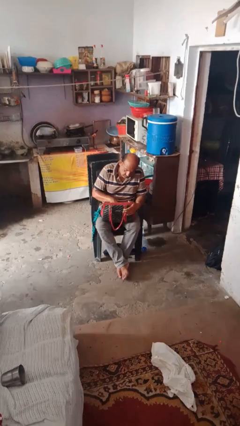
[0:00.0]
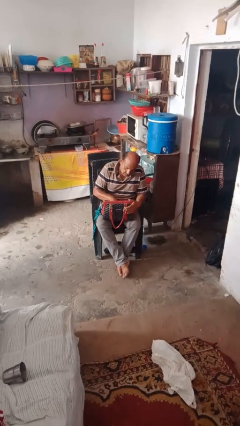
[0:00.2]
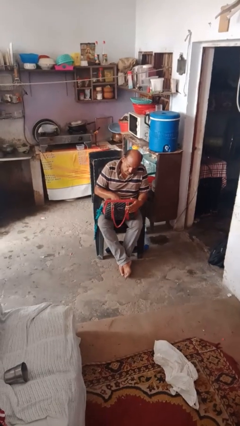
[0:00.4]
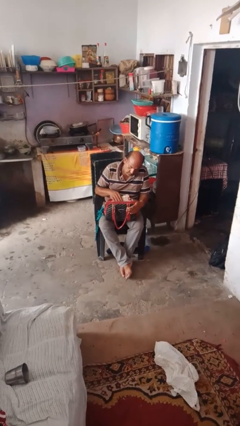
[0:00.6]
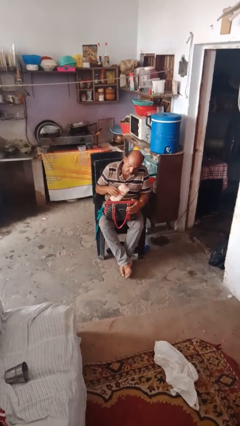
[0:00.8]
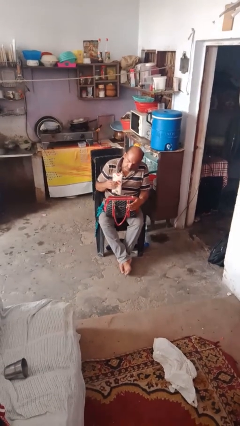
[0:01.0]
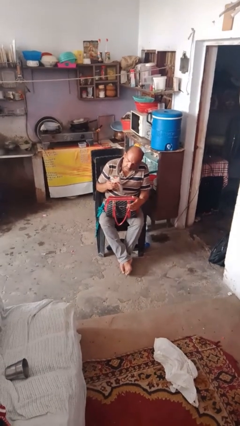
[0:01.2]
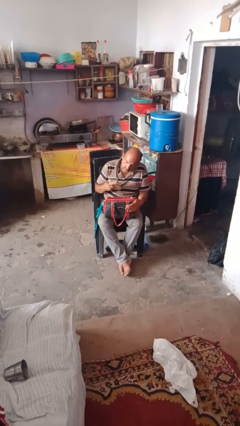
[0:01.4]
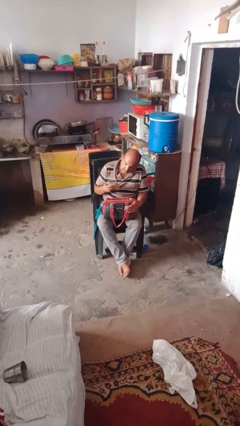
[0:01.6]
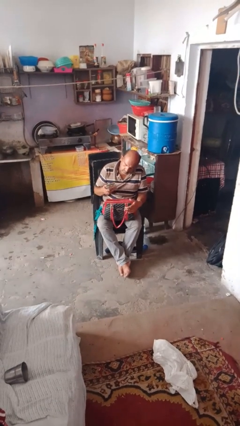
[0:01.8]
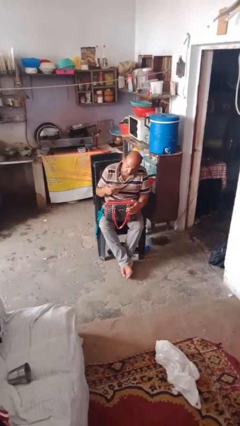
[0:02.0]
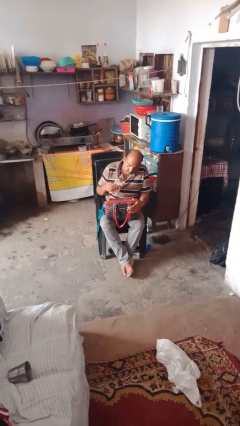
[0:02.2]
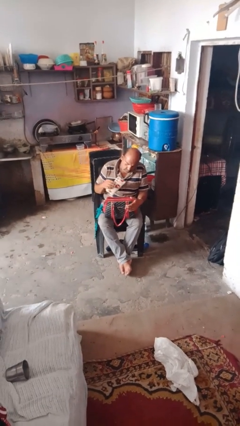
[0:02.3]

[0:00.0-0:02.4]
person takes object from purse

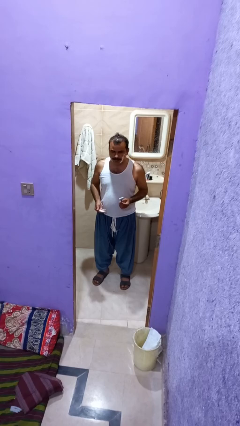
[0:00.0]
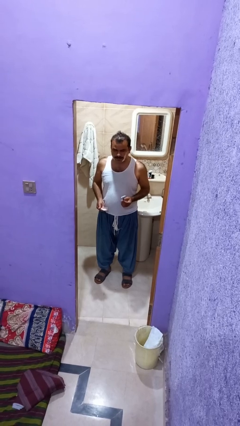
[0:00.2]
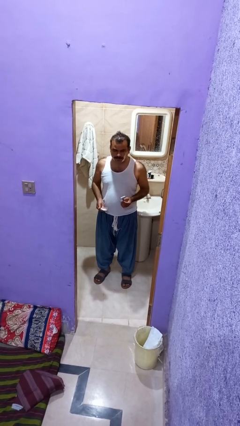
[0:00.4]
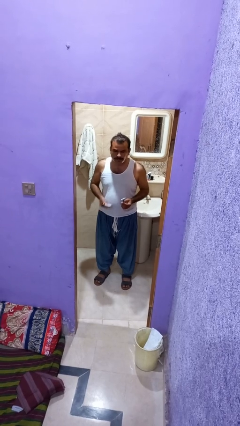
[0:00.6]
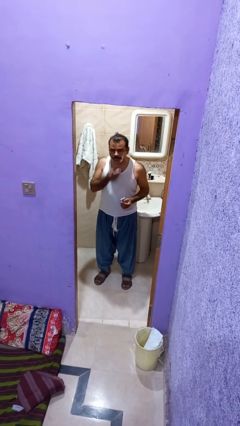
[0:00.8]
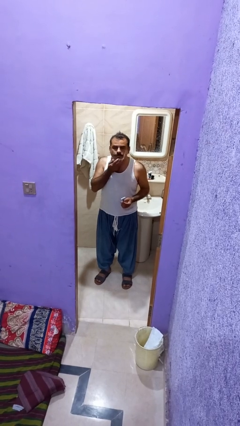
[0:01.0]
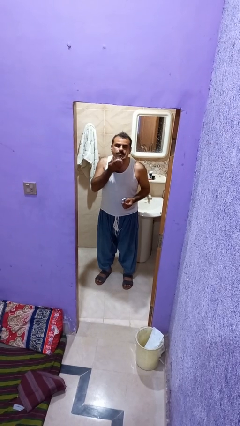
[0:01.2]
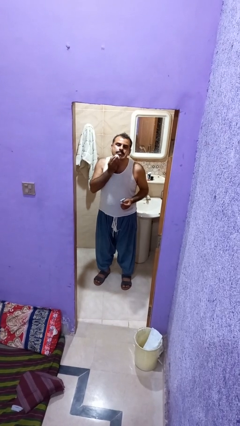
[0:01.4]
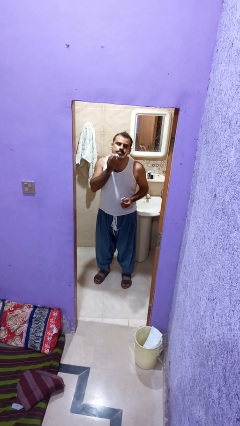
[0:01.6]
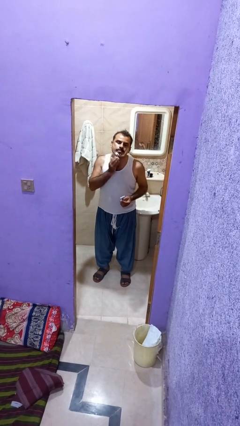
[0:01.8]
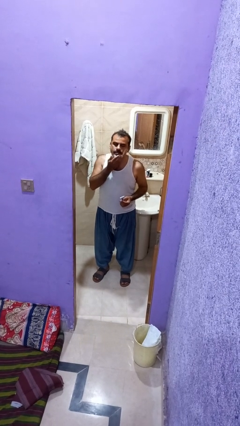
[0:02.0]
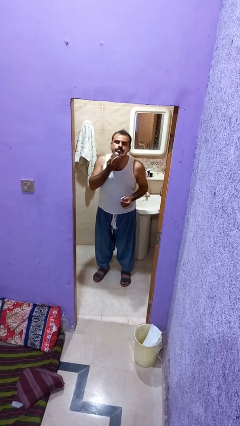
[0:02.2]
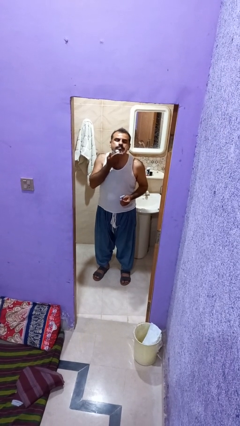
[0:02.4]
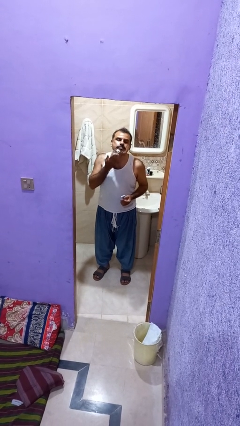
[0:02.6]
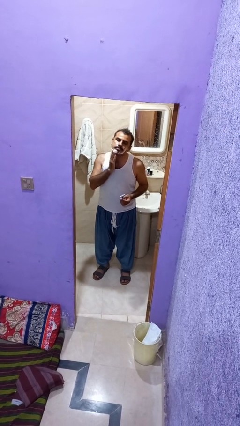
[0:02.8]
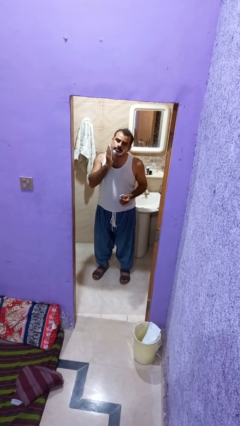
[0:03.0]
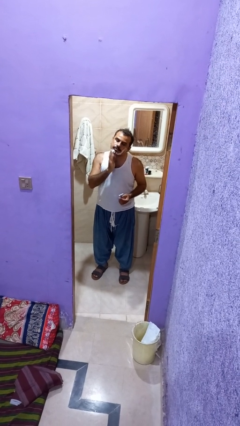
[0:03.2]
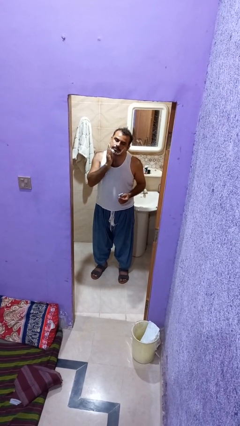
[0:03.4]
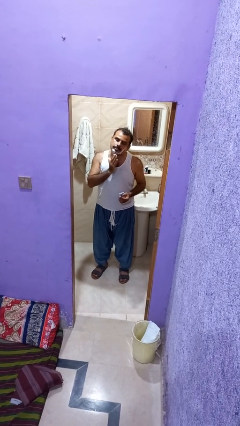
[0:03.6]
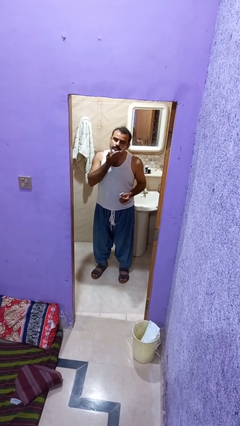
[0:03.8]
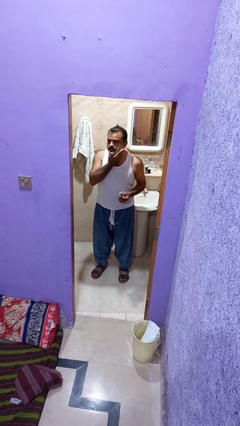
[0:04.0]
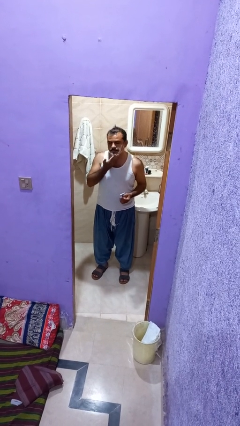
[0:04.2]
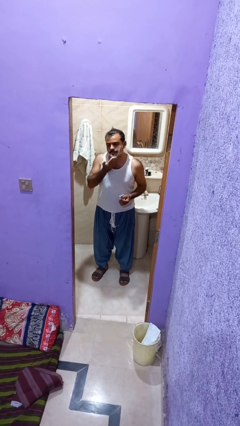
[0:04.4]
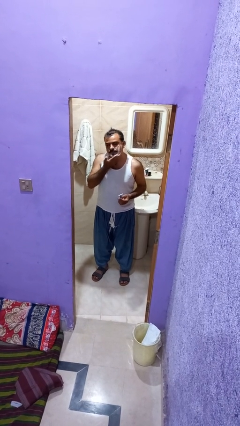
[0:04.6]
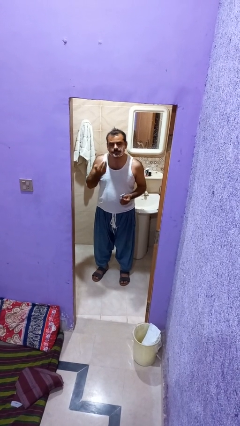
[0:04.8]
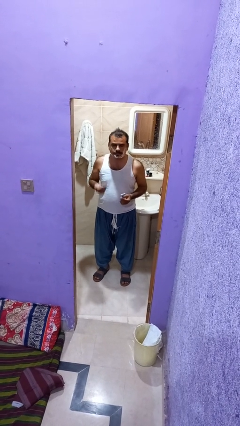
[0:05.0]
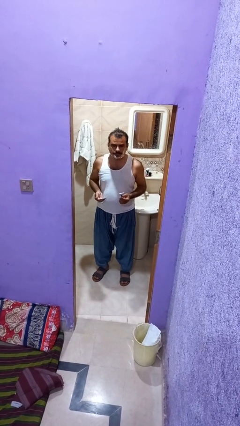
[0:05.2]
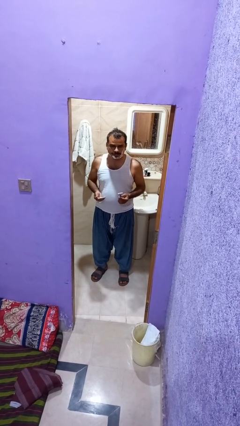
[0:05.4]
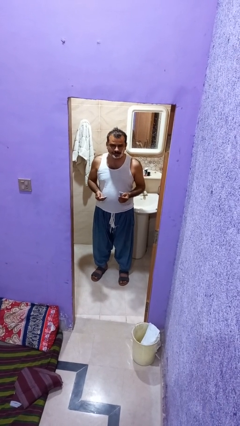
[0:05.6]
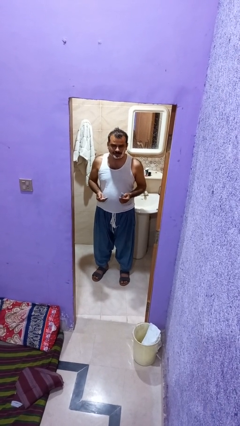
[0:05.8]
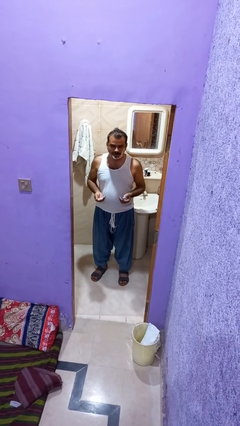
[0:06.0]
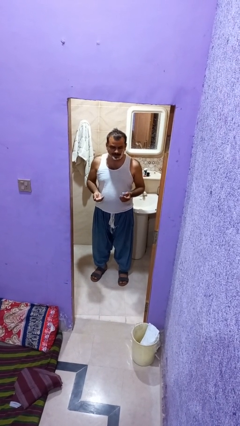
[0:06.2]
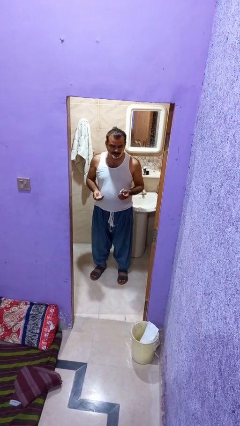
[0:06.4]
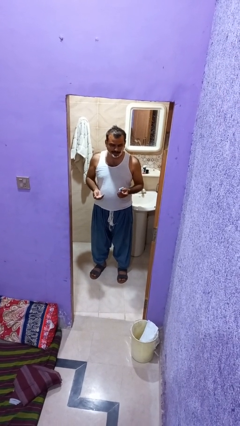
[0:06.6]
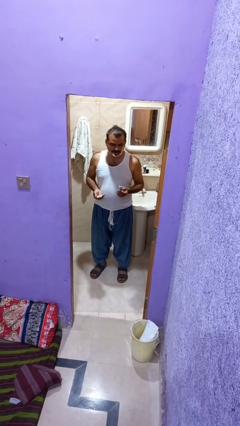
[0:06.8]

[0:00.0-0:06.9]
person applies shaving cream

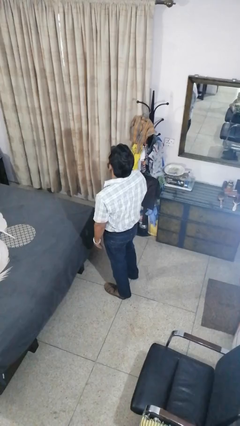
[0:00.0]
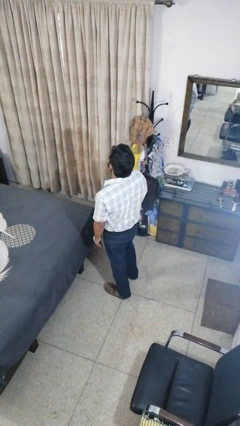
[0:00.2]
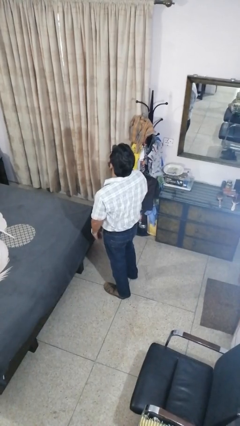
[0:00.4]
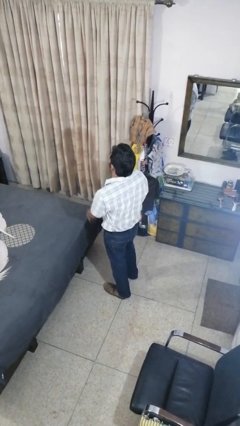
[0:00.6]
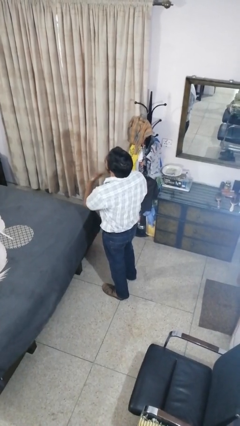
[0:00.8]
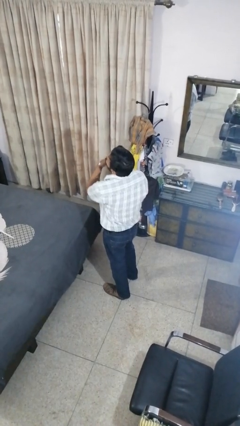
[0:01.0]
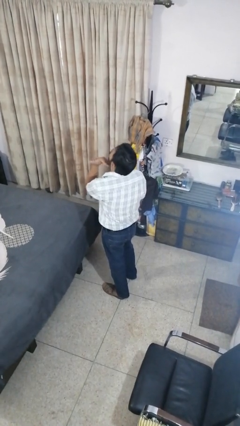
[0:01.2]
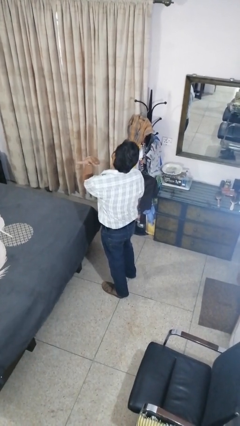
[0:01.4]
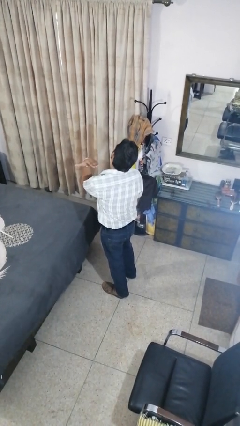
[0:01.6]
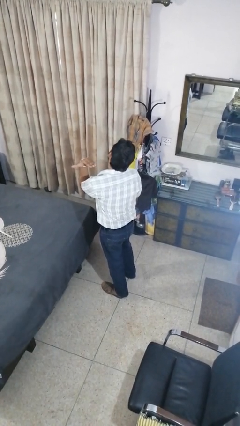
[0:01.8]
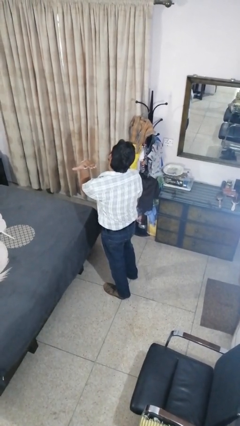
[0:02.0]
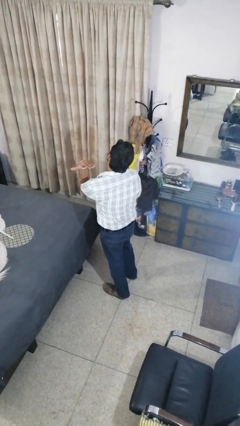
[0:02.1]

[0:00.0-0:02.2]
person gestures cut

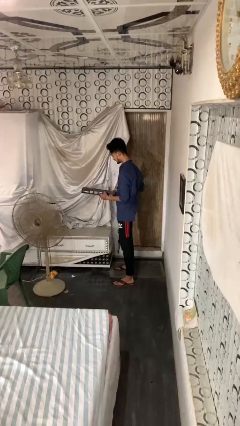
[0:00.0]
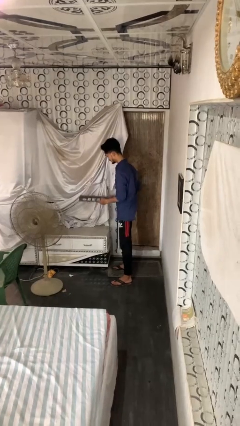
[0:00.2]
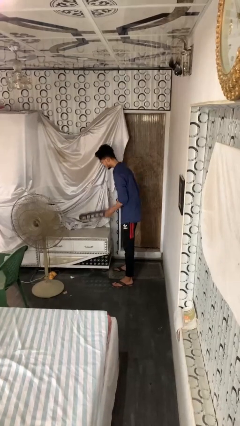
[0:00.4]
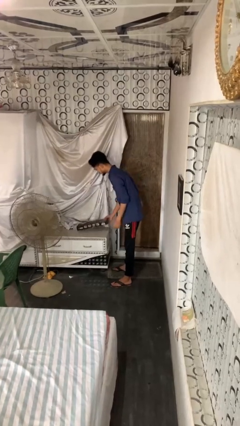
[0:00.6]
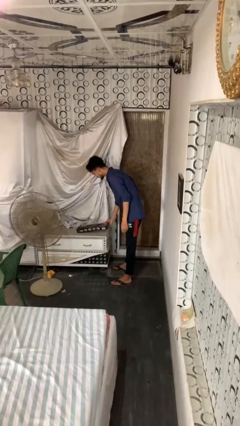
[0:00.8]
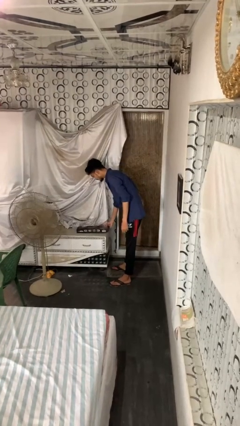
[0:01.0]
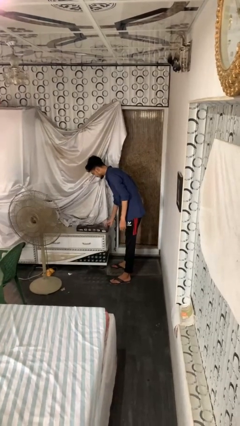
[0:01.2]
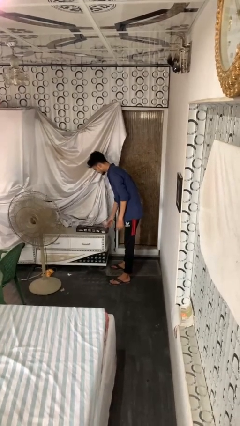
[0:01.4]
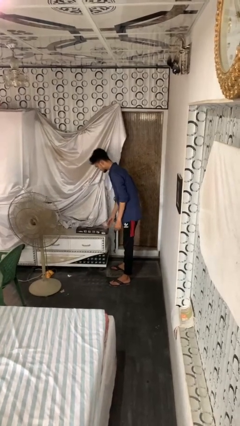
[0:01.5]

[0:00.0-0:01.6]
person puts down object on countertop

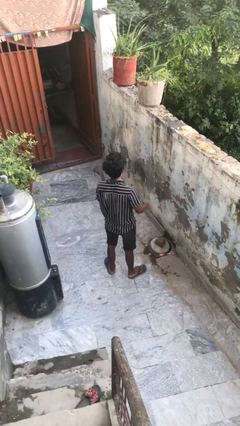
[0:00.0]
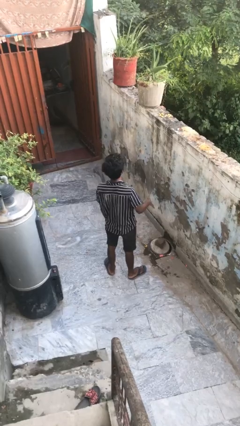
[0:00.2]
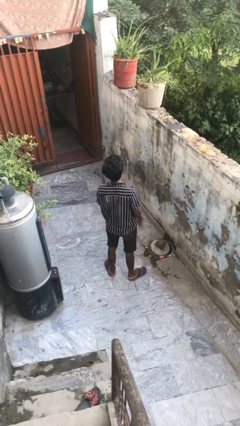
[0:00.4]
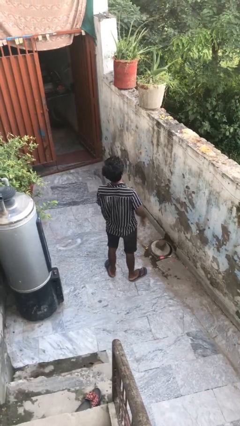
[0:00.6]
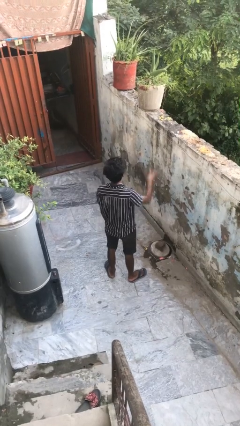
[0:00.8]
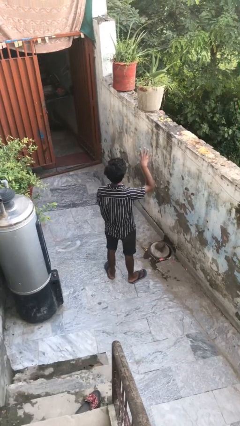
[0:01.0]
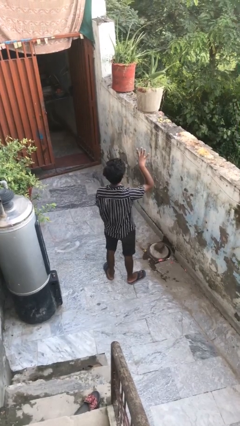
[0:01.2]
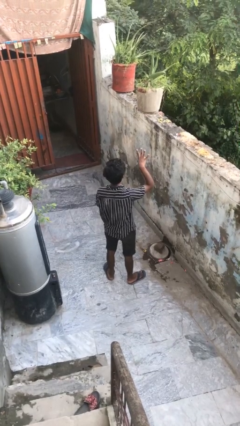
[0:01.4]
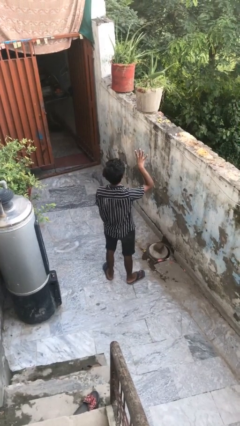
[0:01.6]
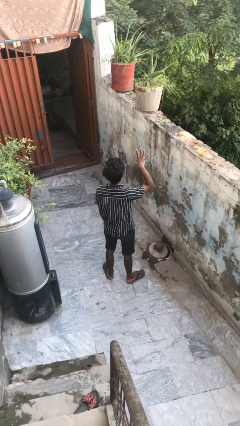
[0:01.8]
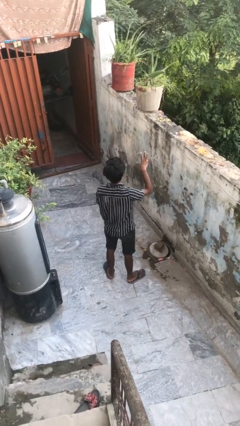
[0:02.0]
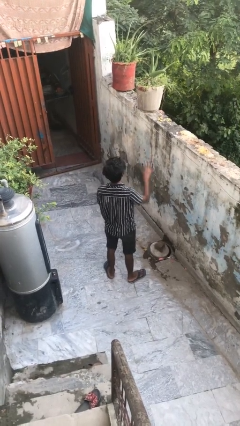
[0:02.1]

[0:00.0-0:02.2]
person gestures number four

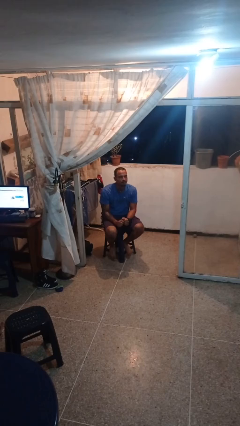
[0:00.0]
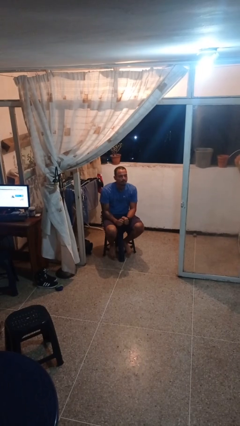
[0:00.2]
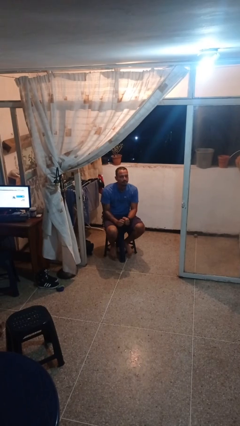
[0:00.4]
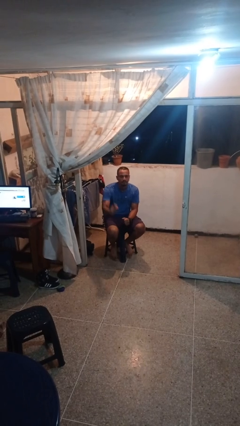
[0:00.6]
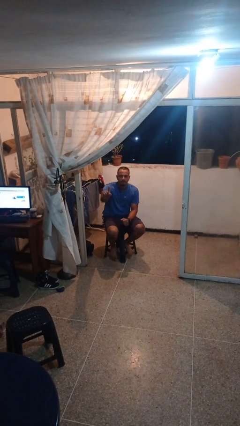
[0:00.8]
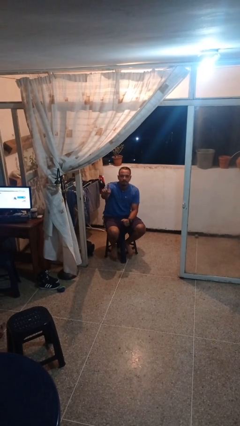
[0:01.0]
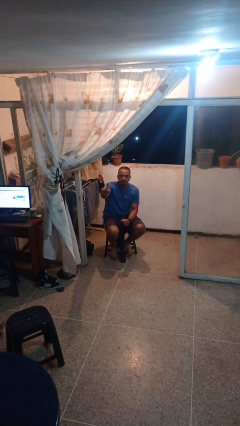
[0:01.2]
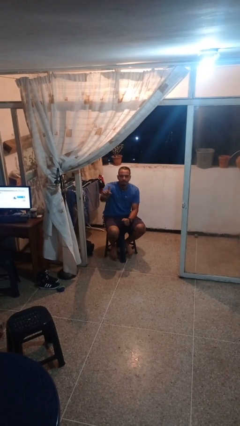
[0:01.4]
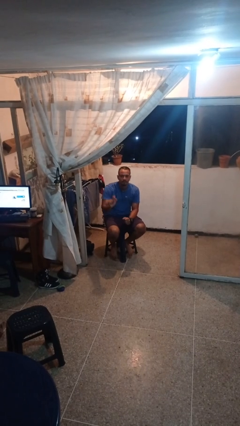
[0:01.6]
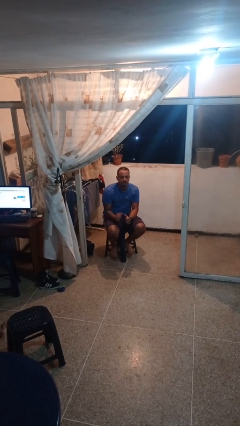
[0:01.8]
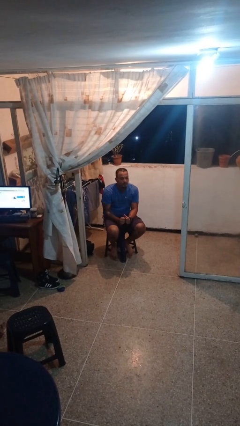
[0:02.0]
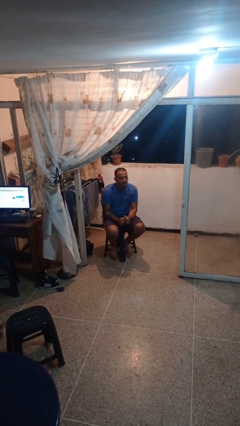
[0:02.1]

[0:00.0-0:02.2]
person gestures number one

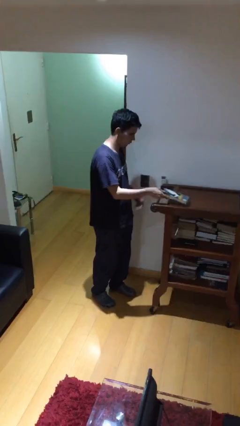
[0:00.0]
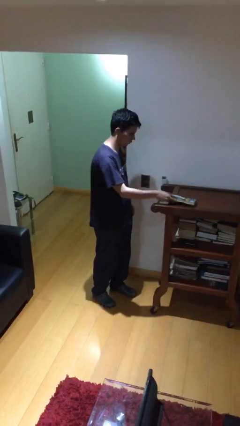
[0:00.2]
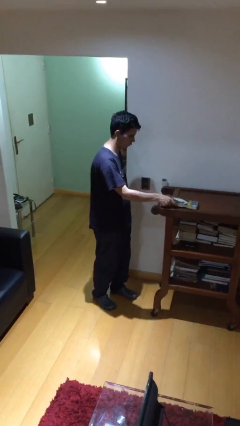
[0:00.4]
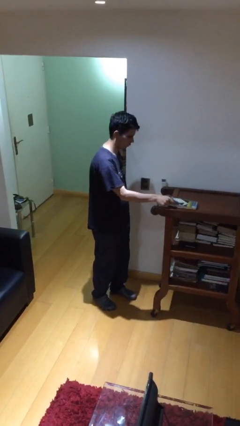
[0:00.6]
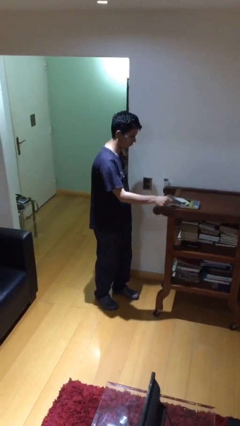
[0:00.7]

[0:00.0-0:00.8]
person puts down object on table
